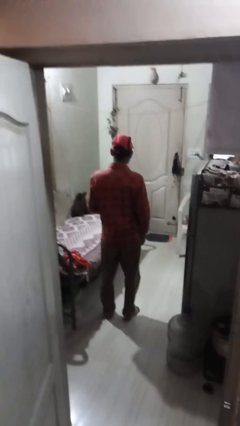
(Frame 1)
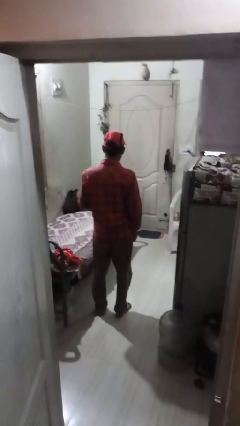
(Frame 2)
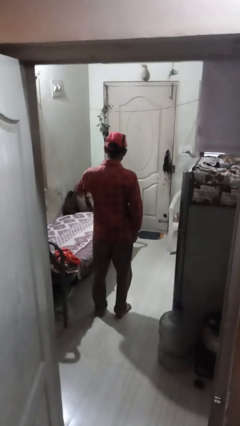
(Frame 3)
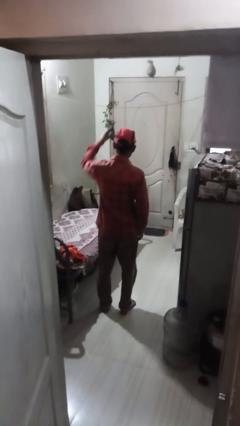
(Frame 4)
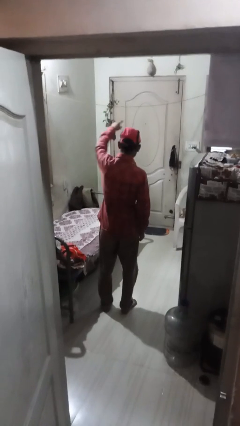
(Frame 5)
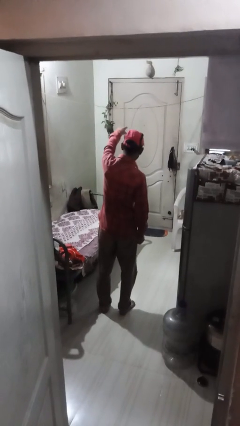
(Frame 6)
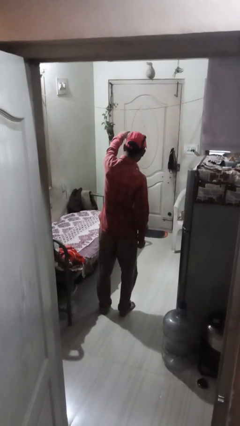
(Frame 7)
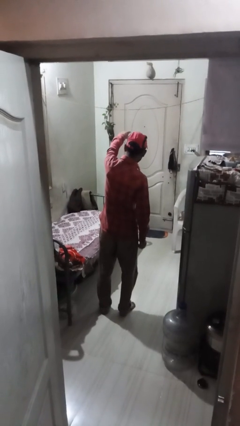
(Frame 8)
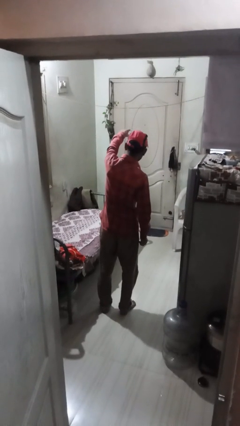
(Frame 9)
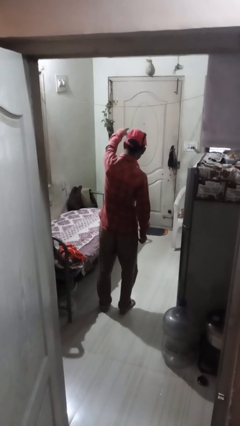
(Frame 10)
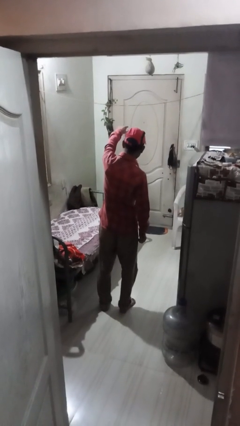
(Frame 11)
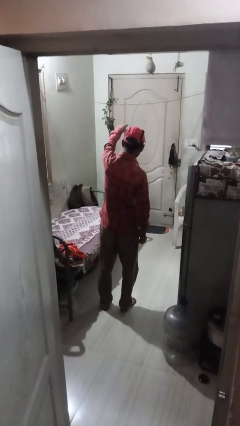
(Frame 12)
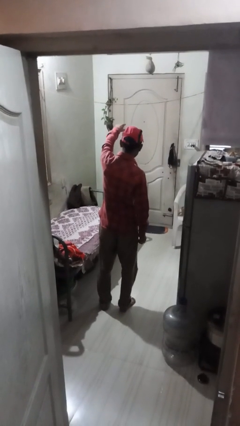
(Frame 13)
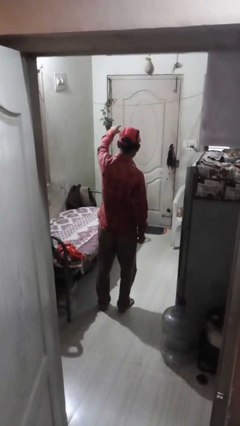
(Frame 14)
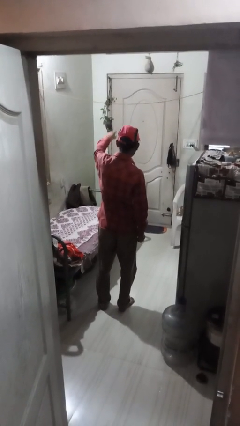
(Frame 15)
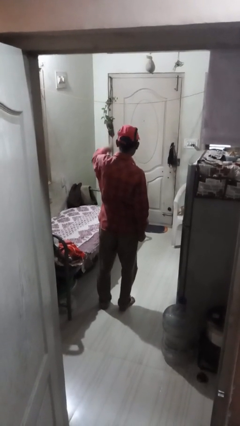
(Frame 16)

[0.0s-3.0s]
person points at person

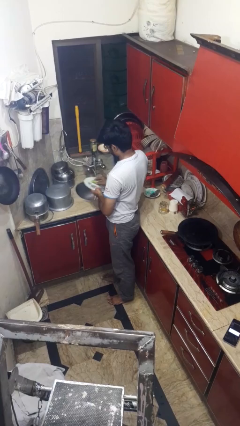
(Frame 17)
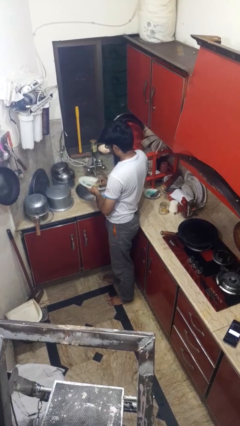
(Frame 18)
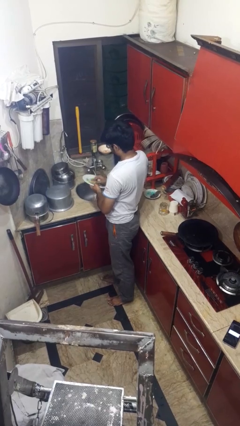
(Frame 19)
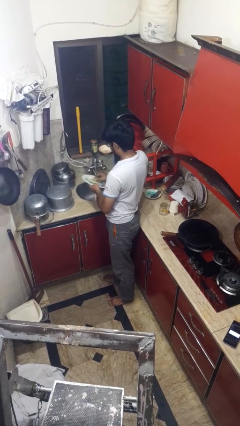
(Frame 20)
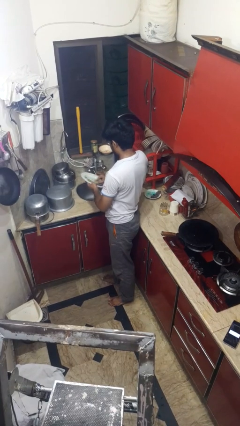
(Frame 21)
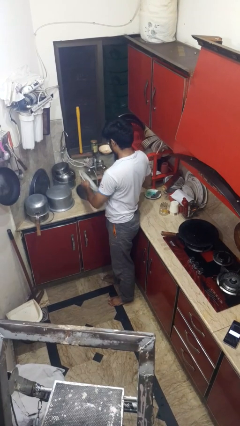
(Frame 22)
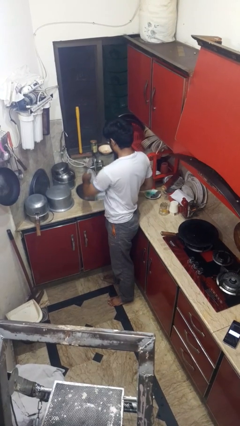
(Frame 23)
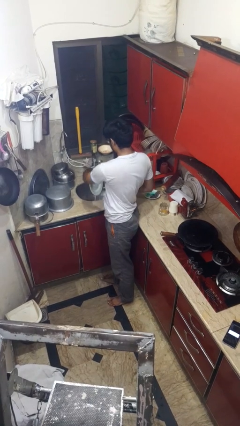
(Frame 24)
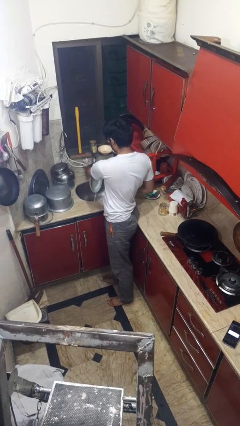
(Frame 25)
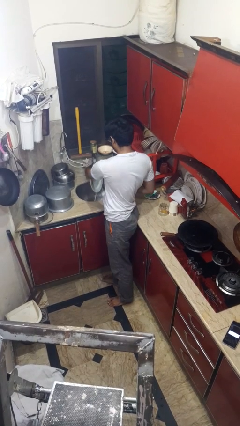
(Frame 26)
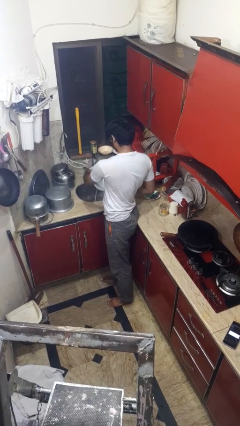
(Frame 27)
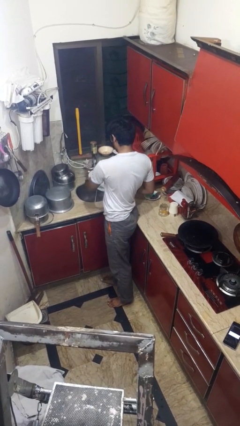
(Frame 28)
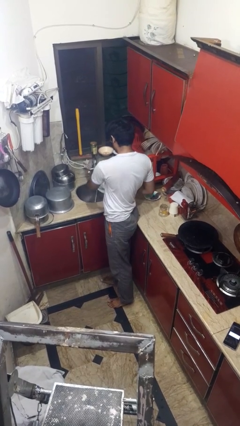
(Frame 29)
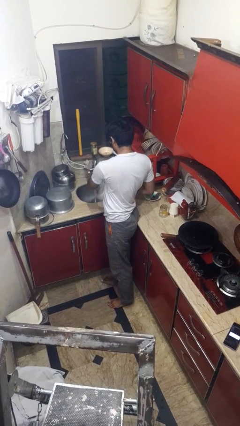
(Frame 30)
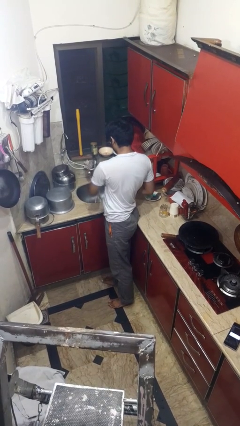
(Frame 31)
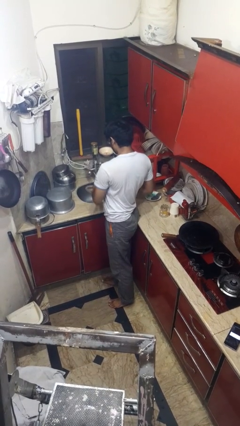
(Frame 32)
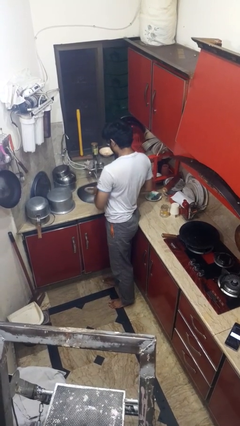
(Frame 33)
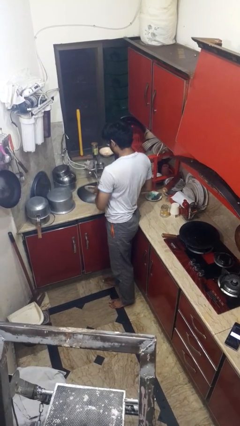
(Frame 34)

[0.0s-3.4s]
person washes dish

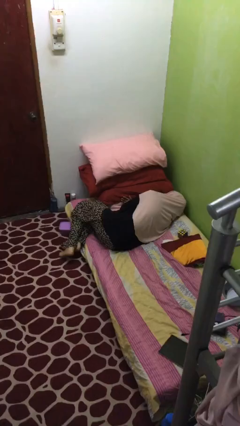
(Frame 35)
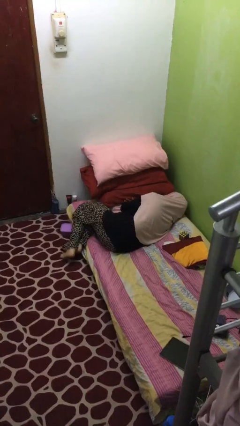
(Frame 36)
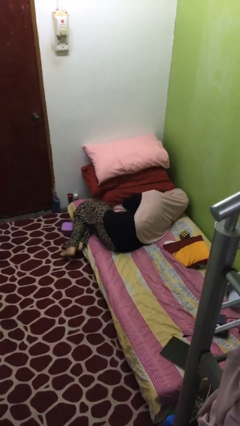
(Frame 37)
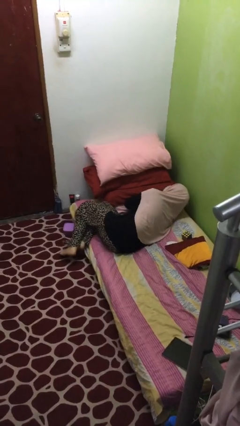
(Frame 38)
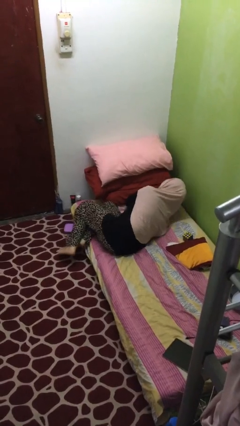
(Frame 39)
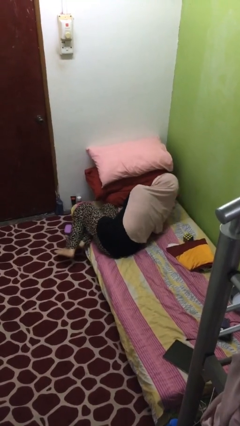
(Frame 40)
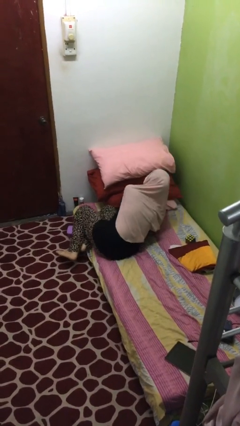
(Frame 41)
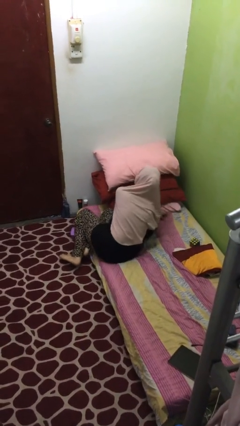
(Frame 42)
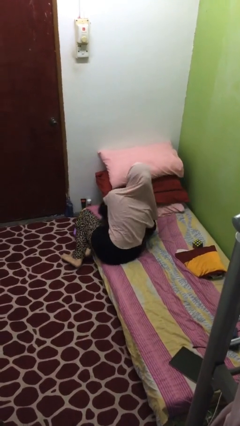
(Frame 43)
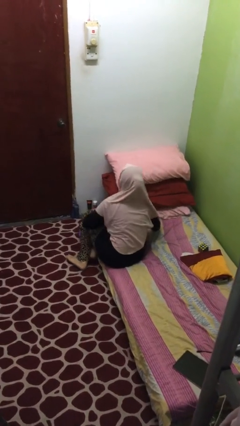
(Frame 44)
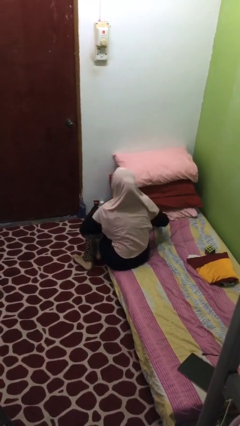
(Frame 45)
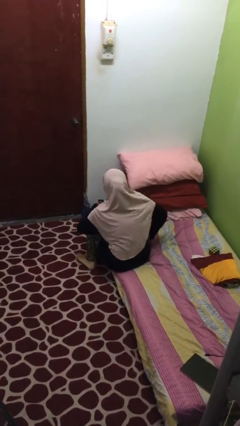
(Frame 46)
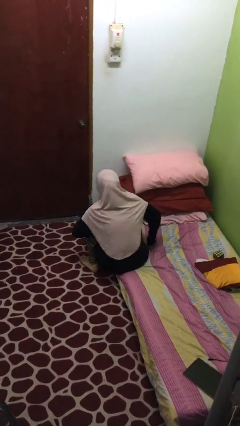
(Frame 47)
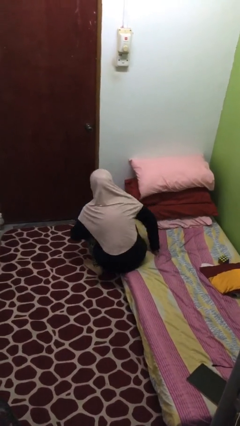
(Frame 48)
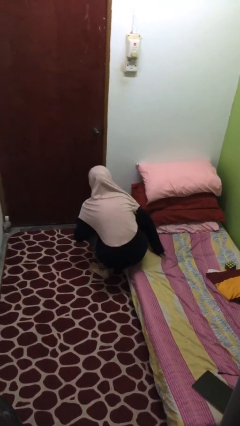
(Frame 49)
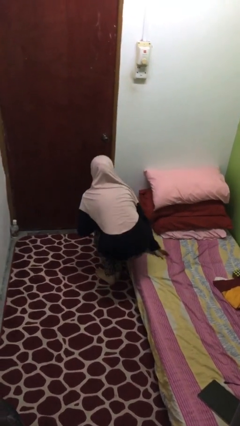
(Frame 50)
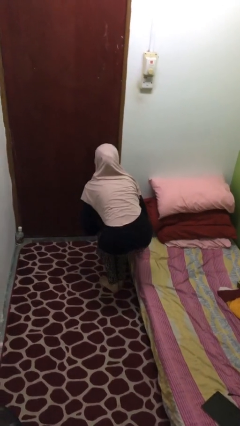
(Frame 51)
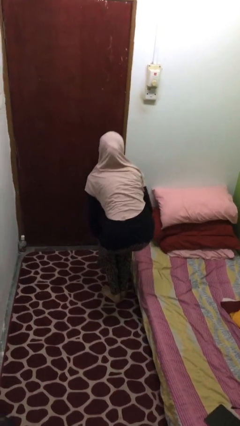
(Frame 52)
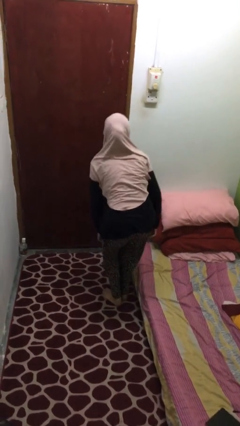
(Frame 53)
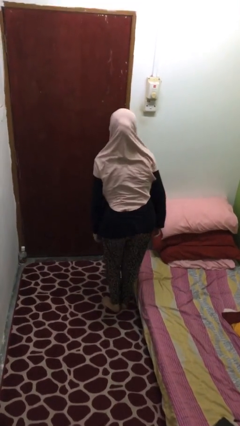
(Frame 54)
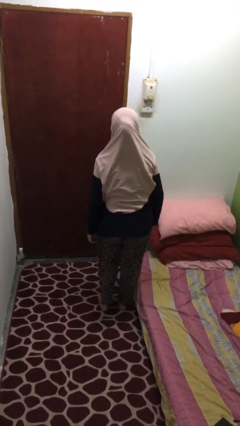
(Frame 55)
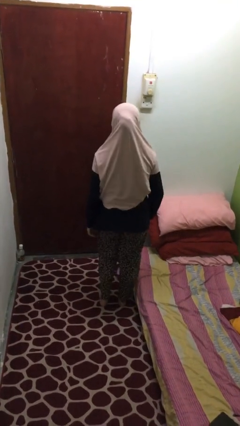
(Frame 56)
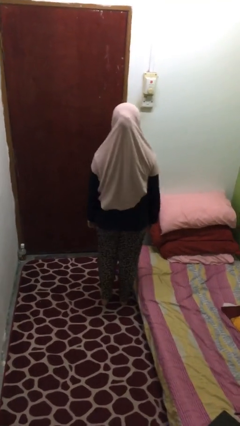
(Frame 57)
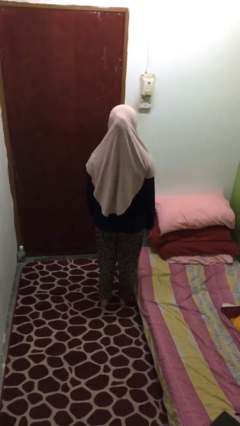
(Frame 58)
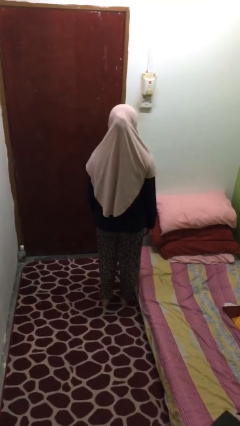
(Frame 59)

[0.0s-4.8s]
person stands up

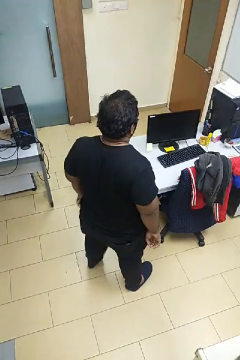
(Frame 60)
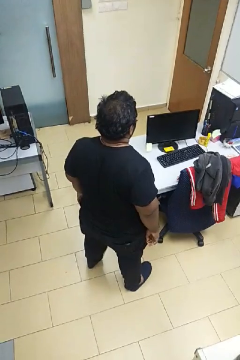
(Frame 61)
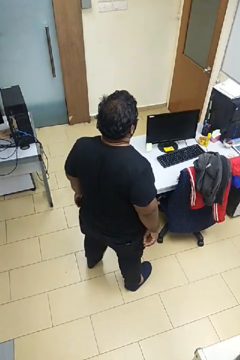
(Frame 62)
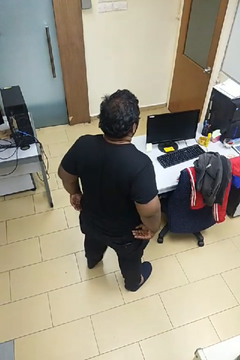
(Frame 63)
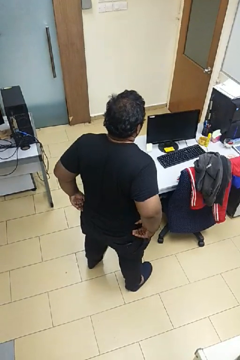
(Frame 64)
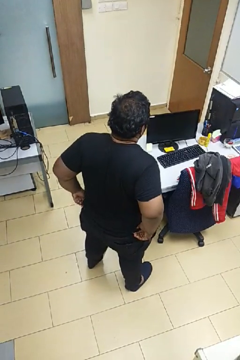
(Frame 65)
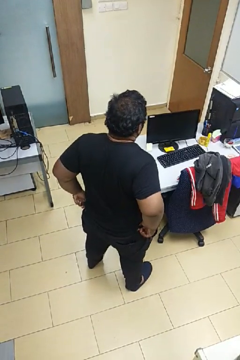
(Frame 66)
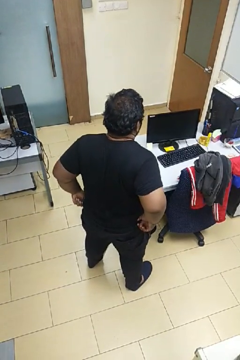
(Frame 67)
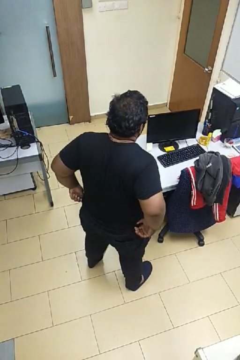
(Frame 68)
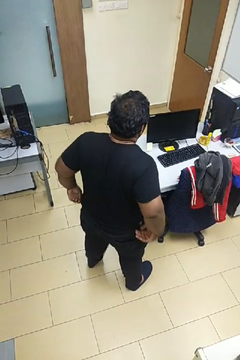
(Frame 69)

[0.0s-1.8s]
person hikes up pants

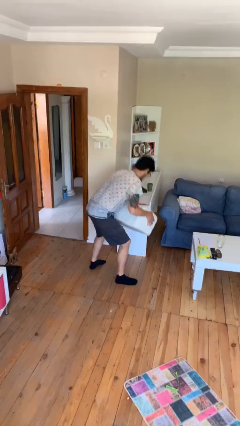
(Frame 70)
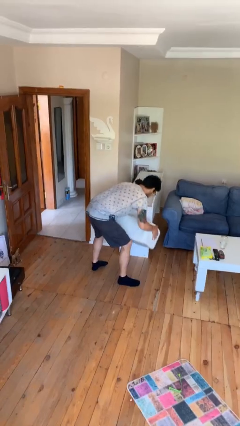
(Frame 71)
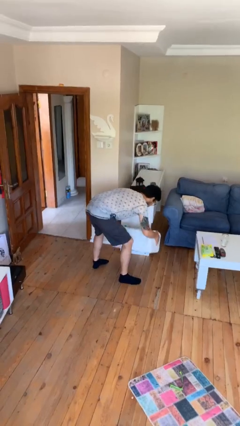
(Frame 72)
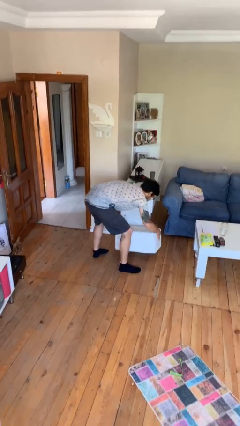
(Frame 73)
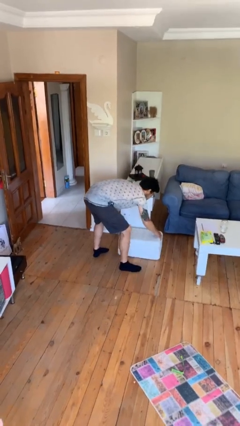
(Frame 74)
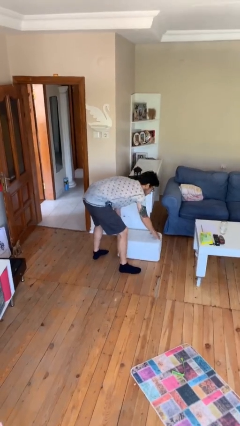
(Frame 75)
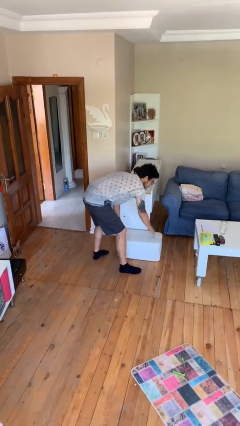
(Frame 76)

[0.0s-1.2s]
person puts down object on floor

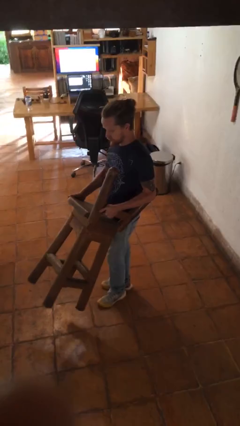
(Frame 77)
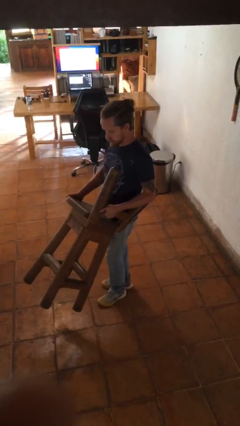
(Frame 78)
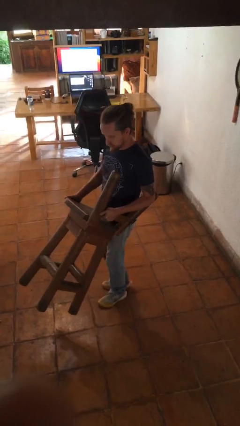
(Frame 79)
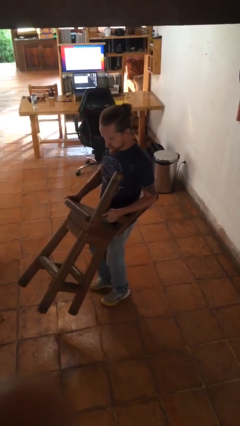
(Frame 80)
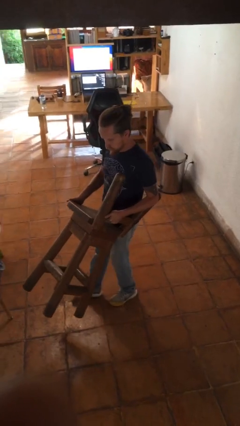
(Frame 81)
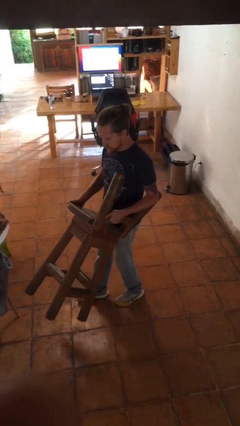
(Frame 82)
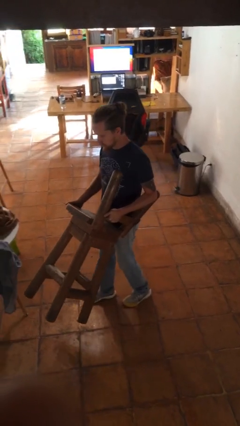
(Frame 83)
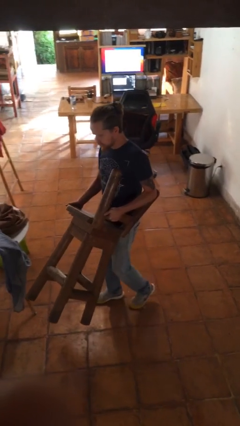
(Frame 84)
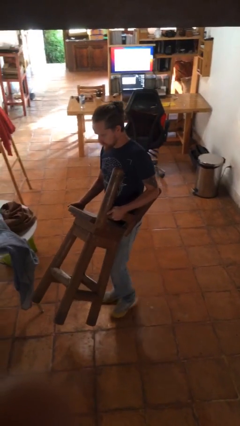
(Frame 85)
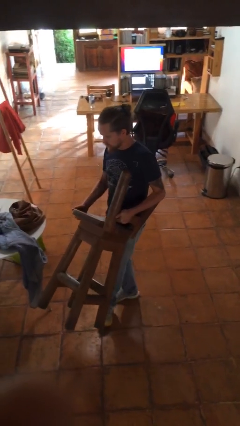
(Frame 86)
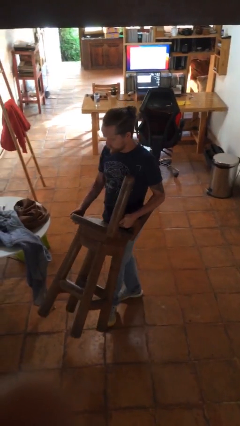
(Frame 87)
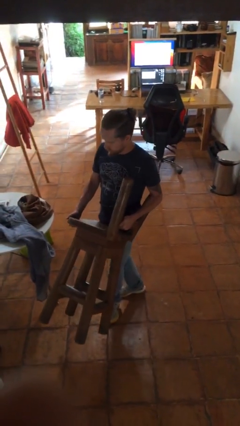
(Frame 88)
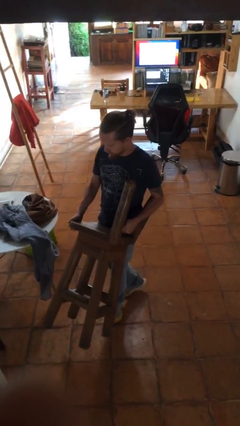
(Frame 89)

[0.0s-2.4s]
person carries furniture

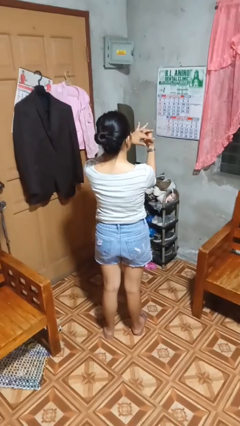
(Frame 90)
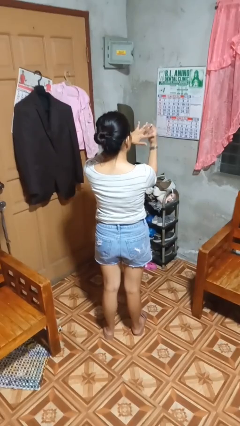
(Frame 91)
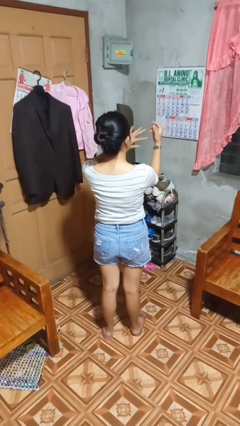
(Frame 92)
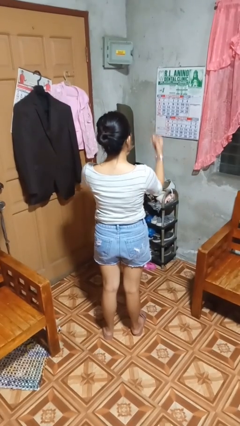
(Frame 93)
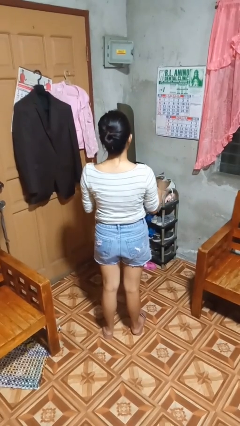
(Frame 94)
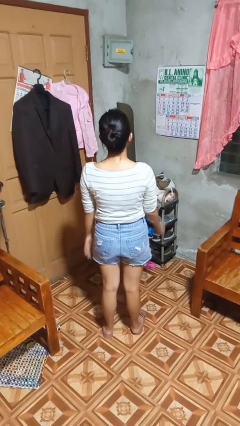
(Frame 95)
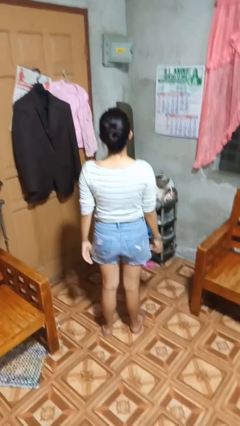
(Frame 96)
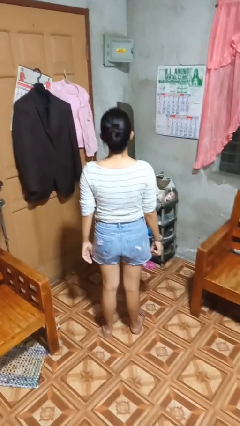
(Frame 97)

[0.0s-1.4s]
person takes off ring
